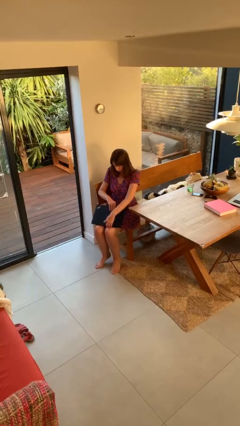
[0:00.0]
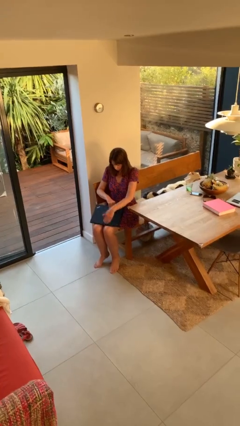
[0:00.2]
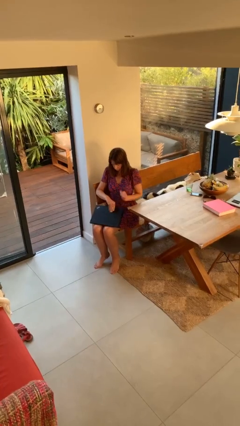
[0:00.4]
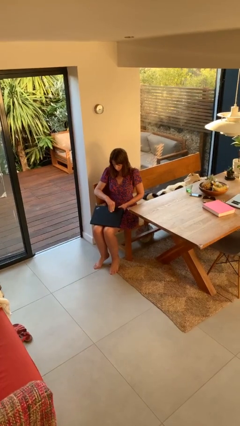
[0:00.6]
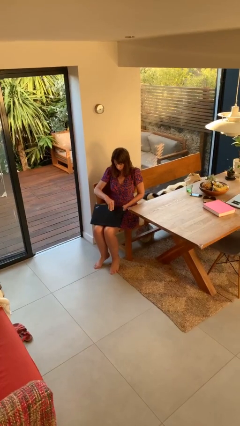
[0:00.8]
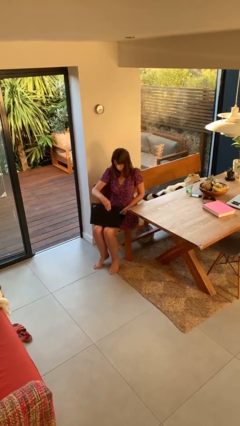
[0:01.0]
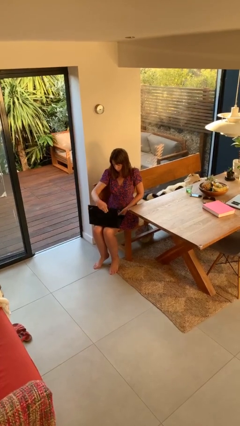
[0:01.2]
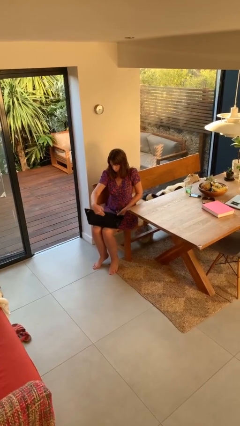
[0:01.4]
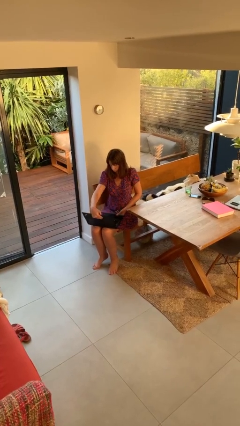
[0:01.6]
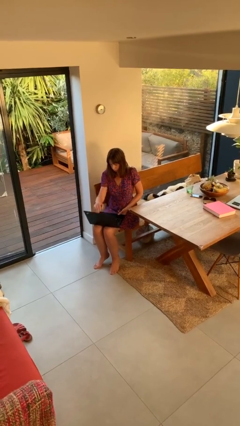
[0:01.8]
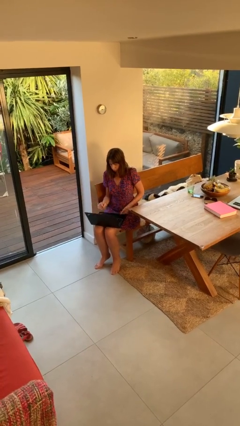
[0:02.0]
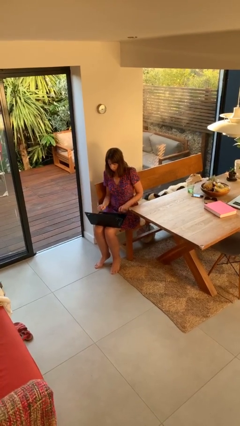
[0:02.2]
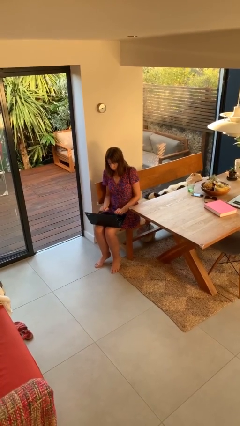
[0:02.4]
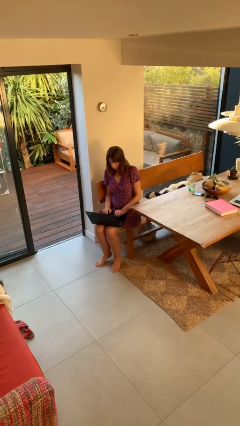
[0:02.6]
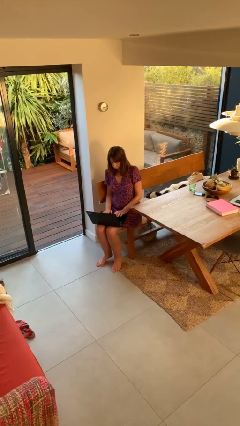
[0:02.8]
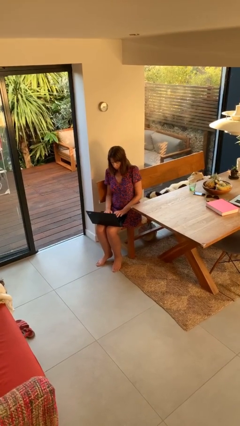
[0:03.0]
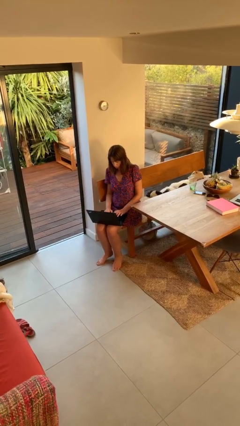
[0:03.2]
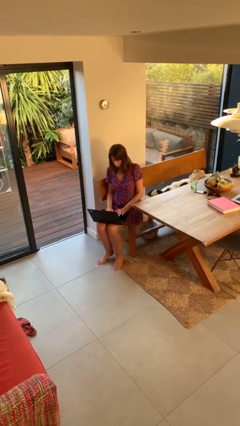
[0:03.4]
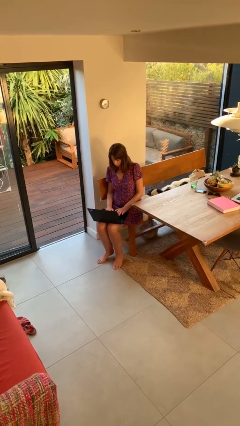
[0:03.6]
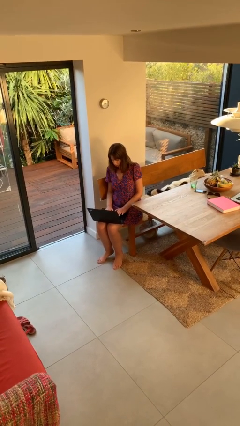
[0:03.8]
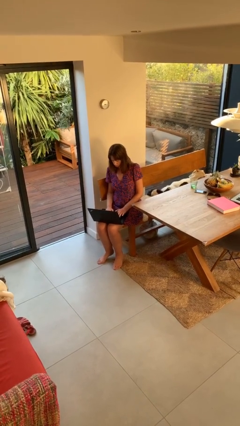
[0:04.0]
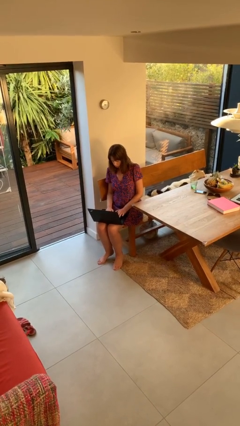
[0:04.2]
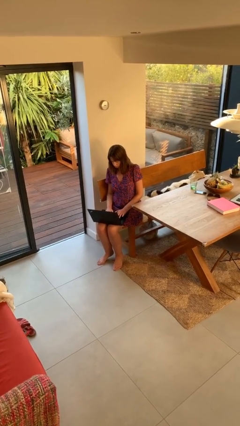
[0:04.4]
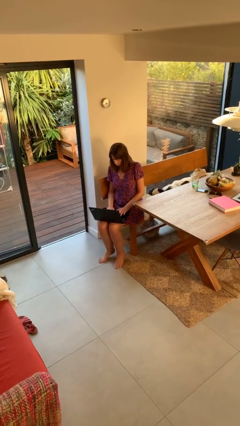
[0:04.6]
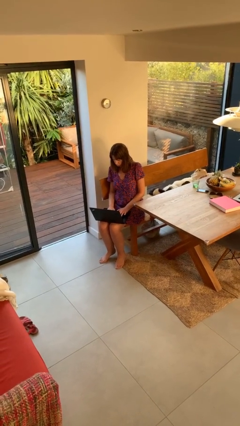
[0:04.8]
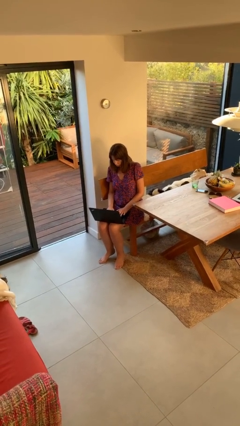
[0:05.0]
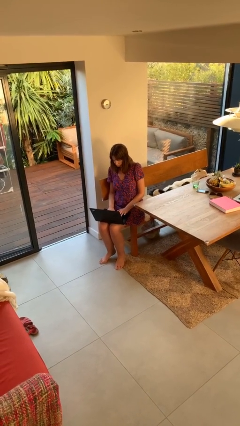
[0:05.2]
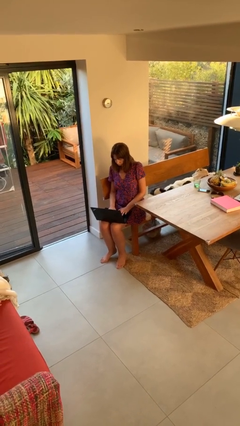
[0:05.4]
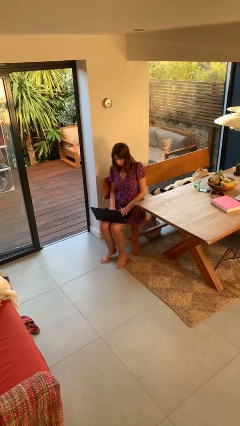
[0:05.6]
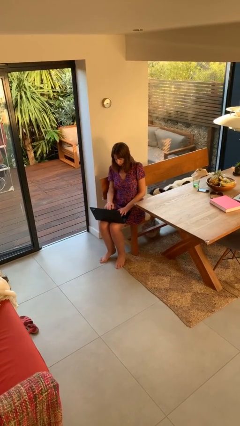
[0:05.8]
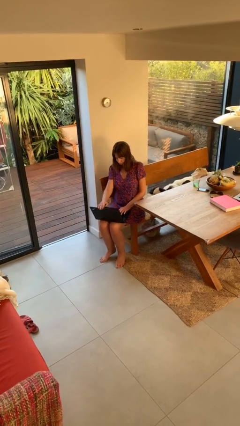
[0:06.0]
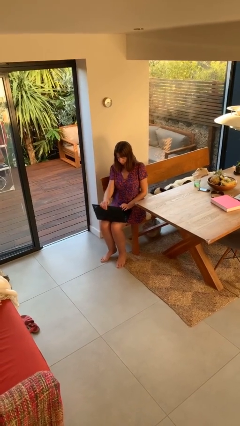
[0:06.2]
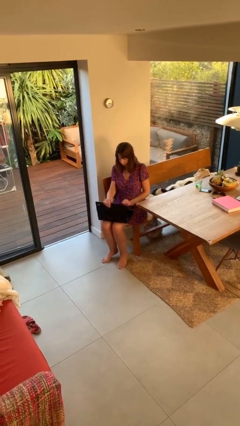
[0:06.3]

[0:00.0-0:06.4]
person interacts with laptop

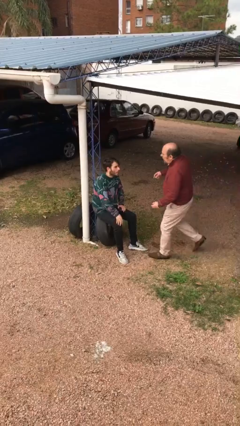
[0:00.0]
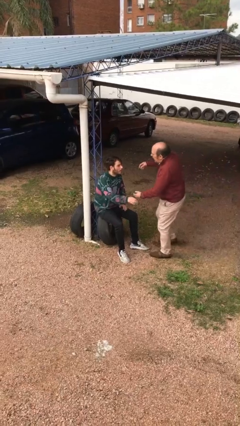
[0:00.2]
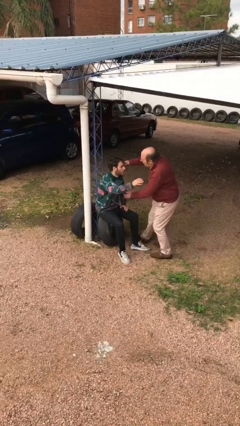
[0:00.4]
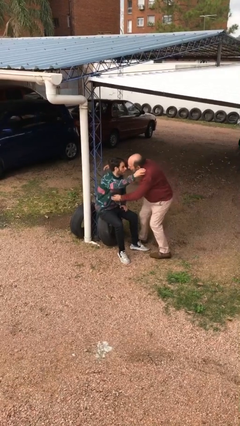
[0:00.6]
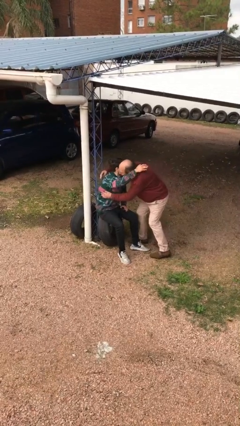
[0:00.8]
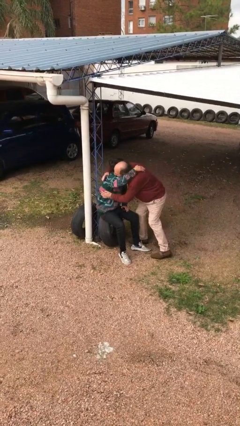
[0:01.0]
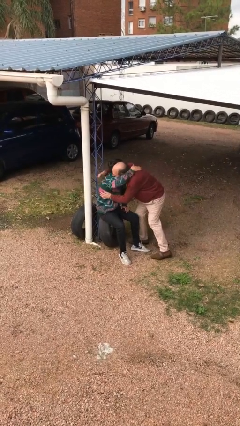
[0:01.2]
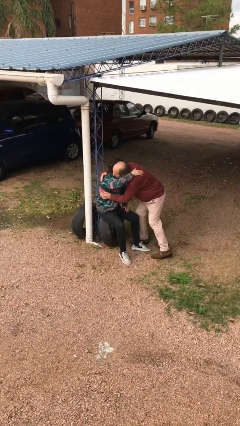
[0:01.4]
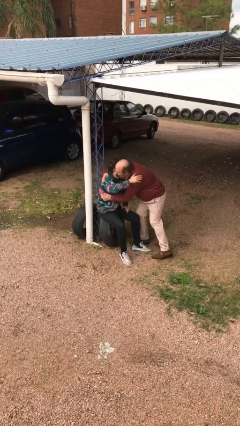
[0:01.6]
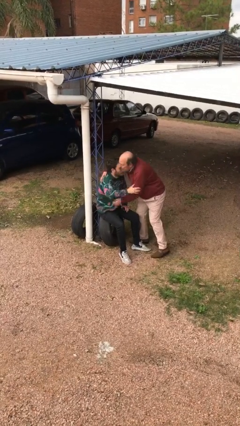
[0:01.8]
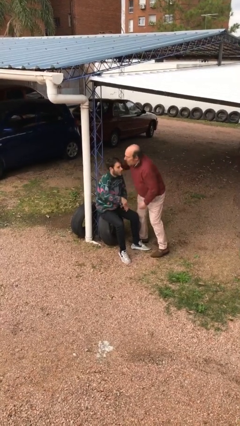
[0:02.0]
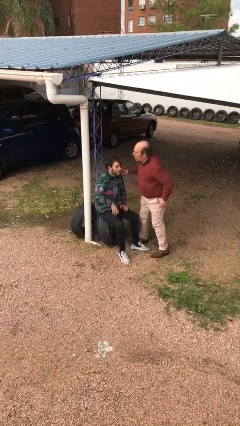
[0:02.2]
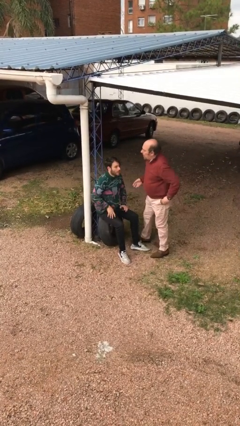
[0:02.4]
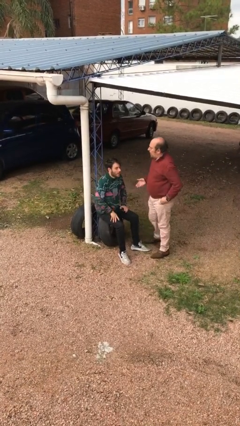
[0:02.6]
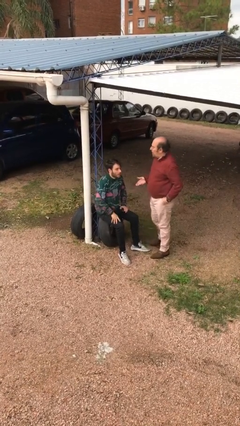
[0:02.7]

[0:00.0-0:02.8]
person embraces person

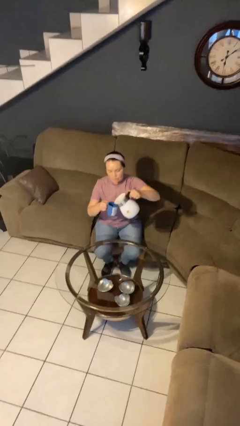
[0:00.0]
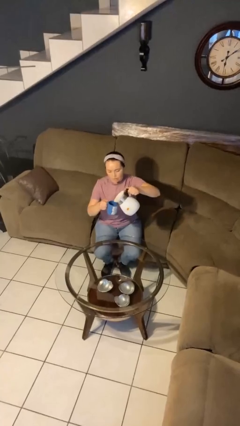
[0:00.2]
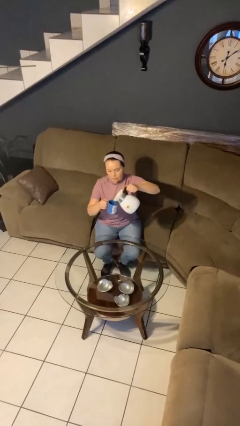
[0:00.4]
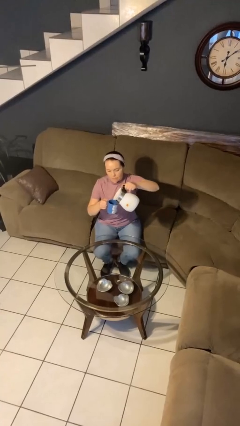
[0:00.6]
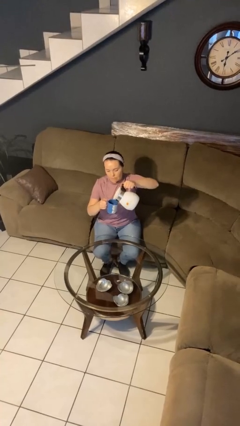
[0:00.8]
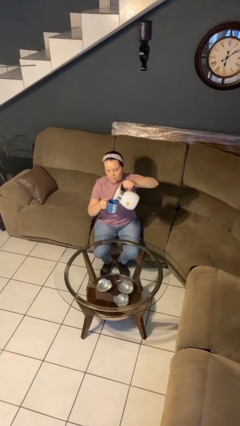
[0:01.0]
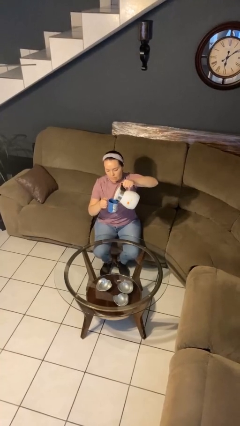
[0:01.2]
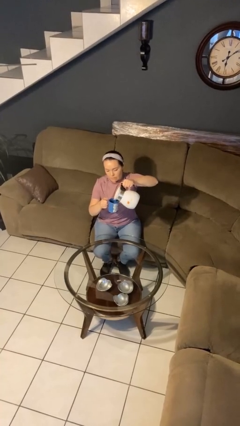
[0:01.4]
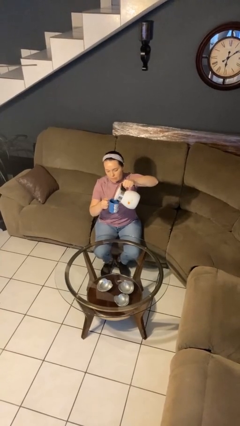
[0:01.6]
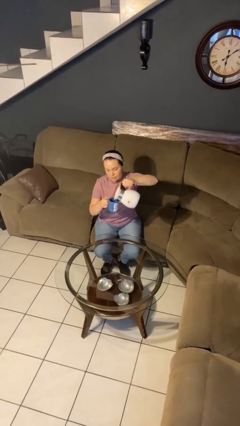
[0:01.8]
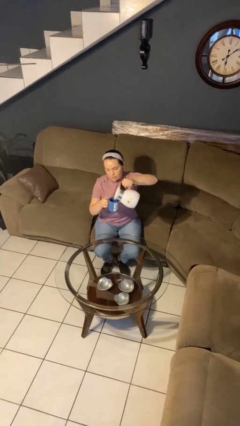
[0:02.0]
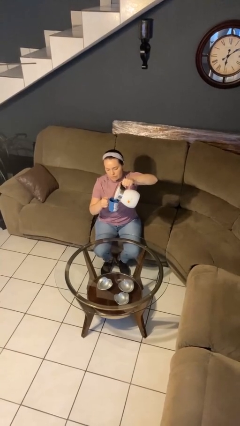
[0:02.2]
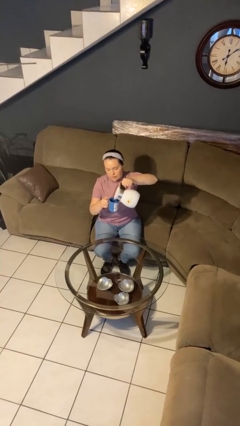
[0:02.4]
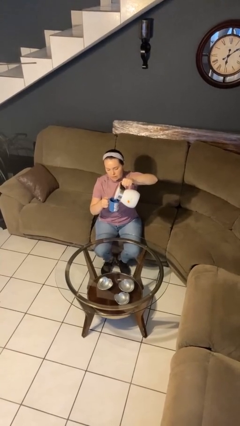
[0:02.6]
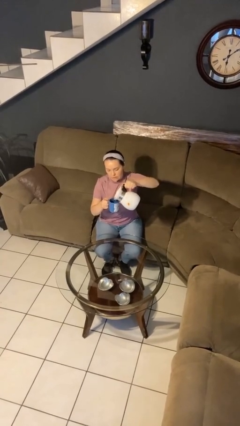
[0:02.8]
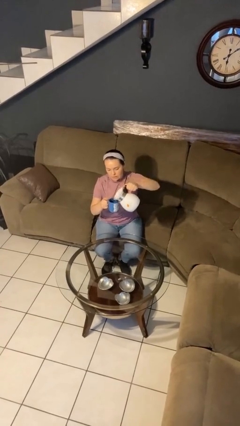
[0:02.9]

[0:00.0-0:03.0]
person pours coffee into mug

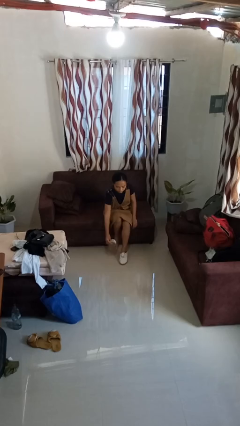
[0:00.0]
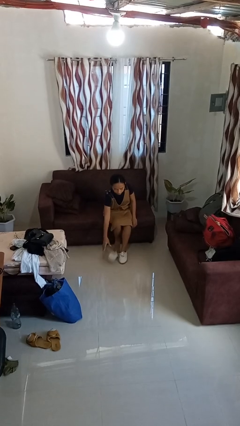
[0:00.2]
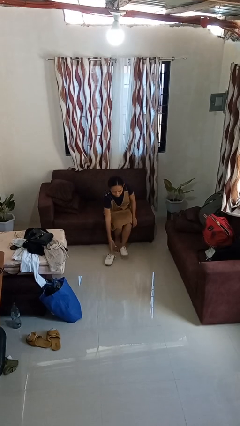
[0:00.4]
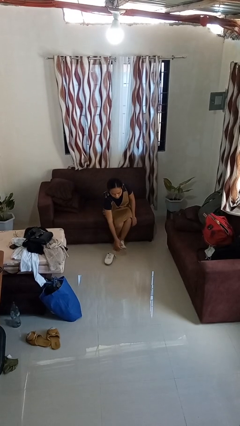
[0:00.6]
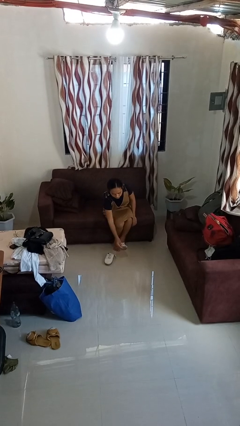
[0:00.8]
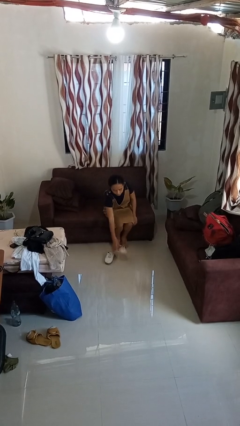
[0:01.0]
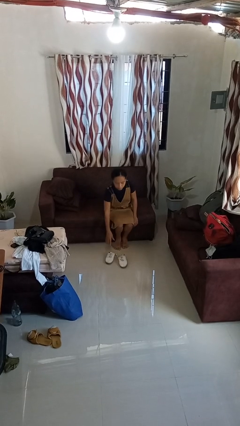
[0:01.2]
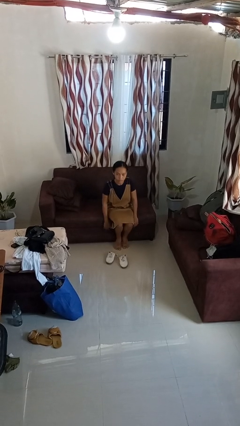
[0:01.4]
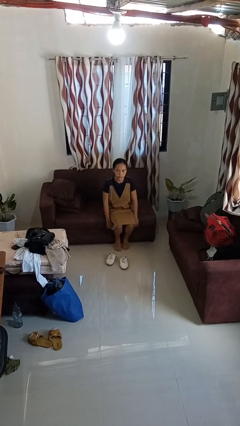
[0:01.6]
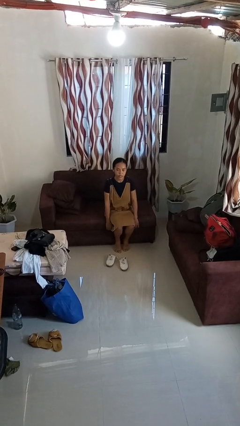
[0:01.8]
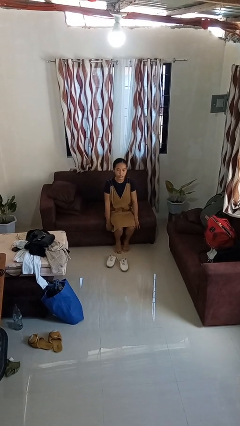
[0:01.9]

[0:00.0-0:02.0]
person takes off shoes

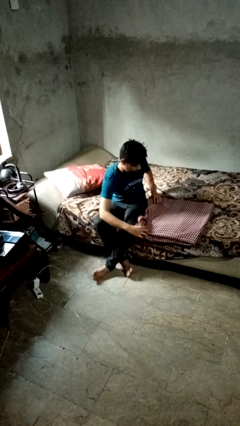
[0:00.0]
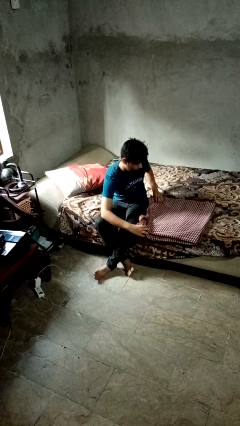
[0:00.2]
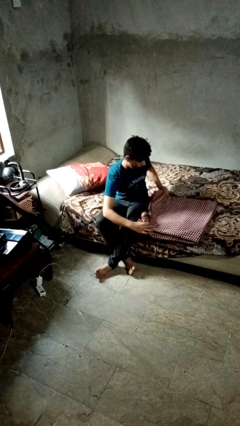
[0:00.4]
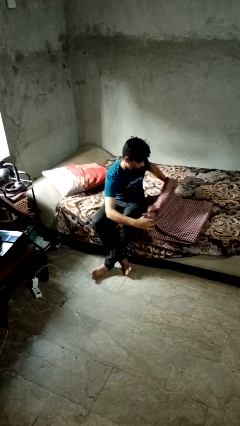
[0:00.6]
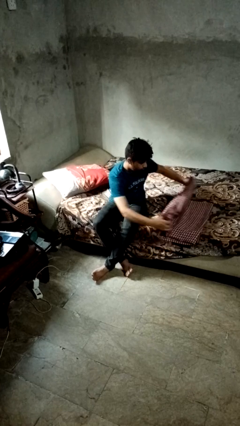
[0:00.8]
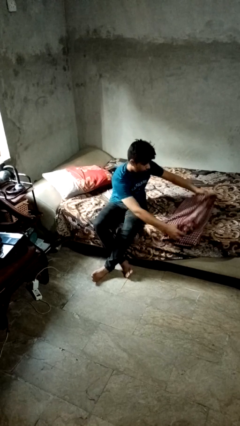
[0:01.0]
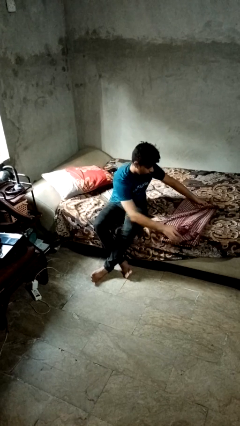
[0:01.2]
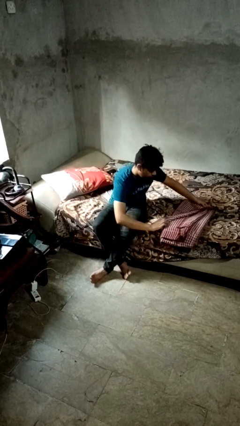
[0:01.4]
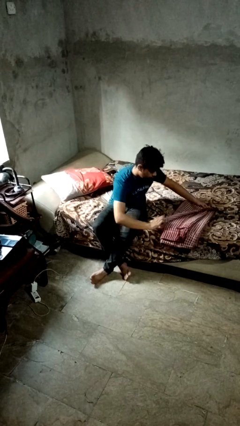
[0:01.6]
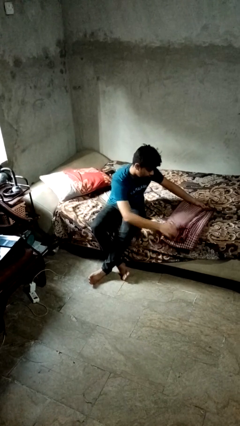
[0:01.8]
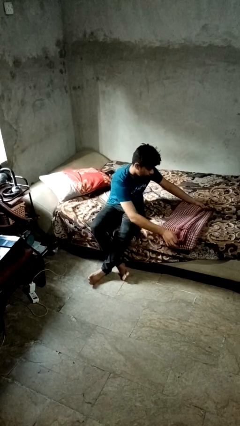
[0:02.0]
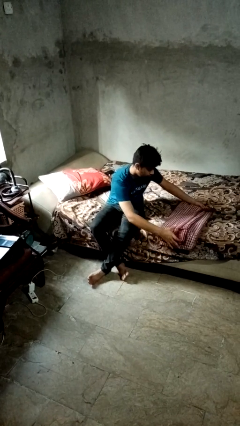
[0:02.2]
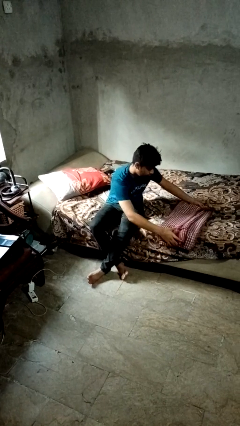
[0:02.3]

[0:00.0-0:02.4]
person folds blanket

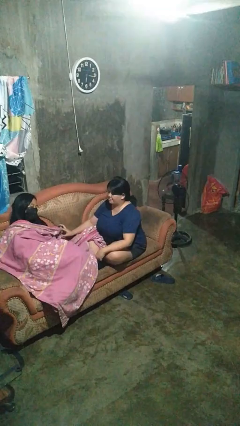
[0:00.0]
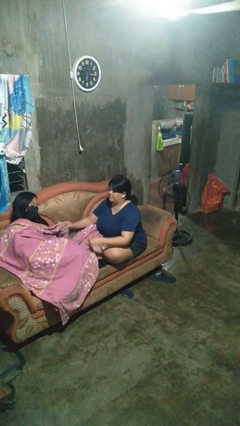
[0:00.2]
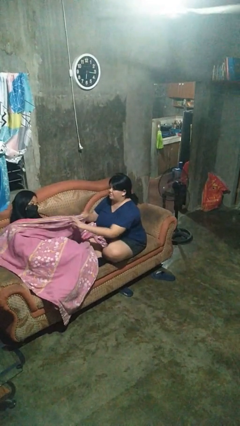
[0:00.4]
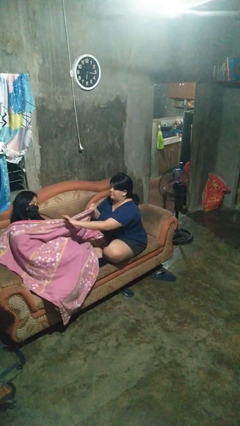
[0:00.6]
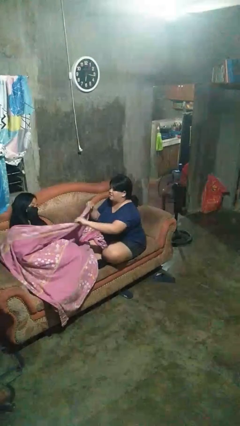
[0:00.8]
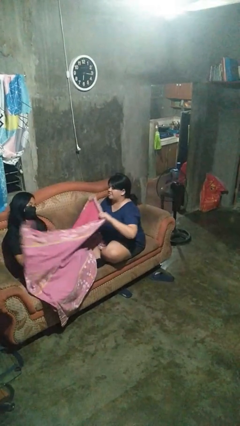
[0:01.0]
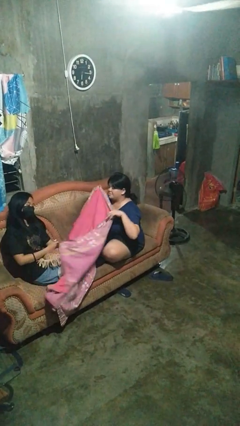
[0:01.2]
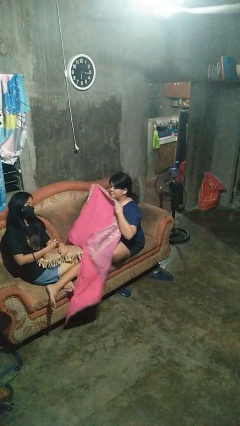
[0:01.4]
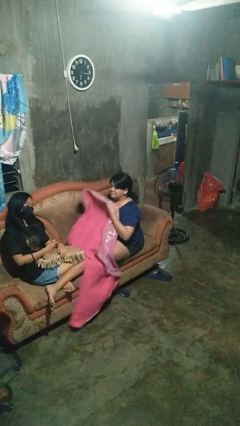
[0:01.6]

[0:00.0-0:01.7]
person uncovers friend with blanket
